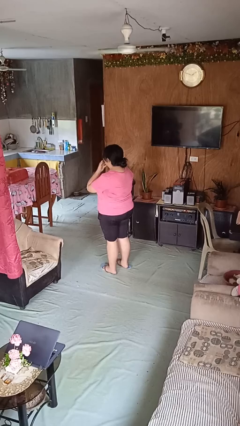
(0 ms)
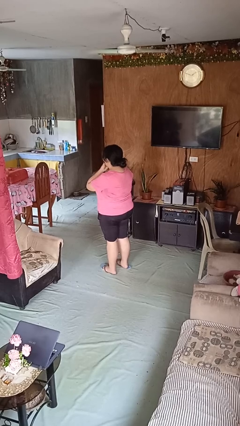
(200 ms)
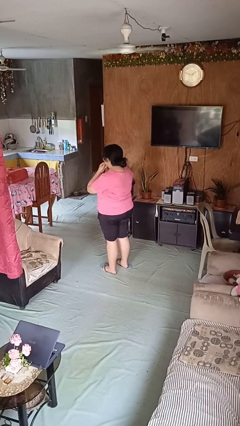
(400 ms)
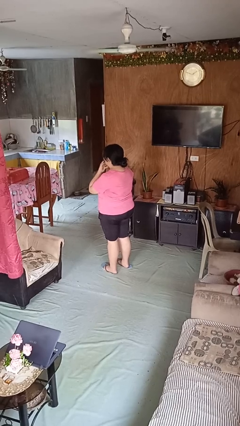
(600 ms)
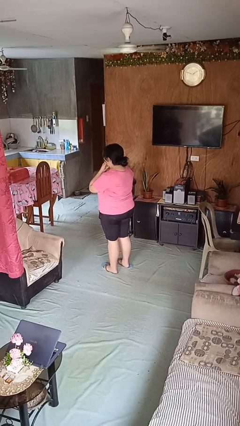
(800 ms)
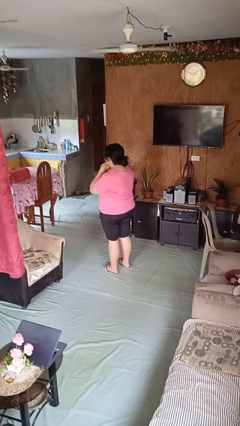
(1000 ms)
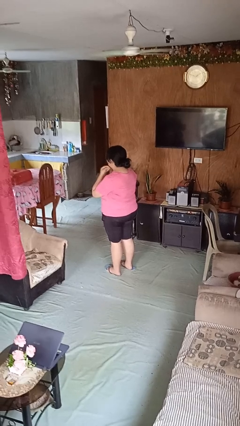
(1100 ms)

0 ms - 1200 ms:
person strokes chin

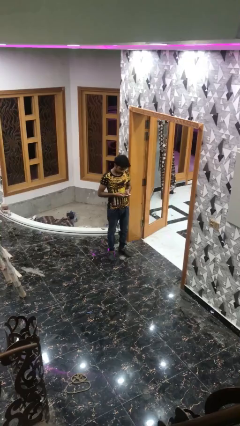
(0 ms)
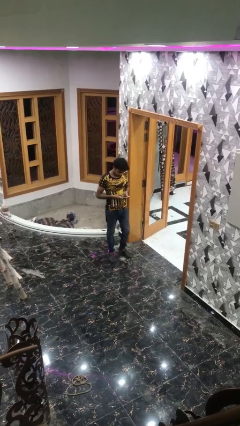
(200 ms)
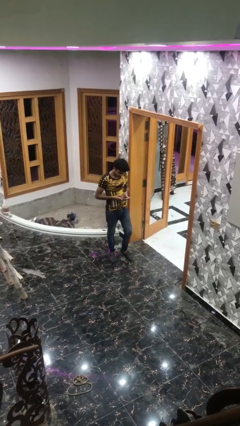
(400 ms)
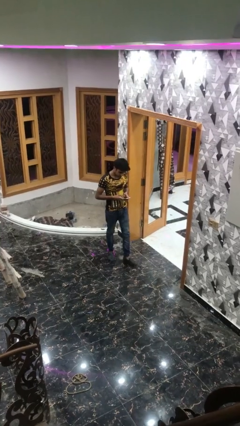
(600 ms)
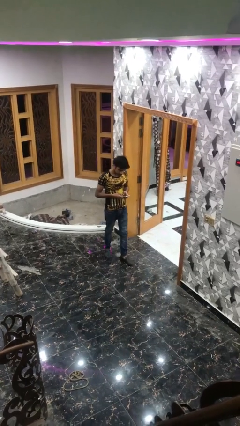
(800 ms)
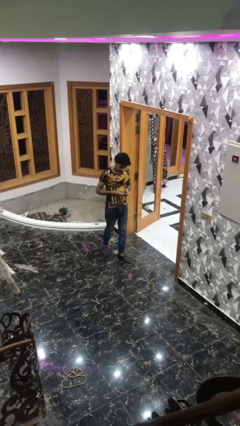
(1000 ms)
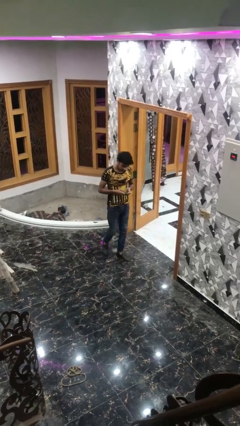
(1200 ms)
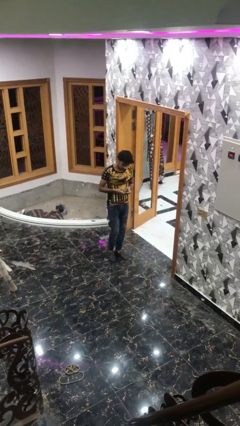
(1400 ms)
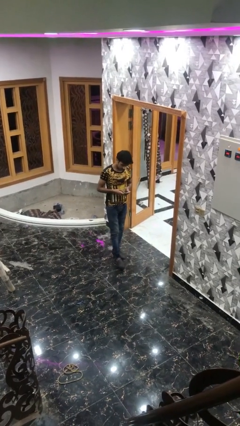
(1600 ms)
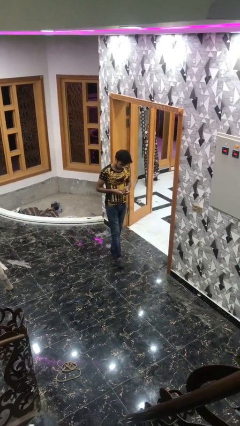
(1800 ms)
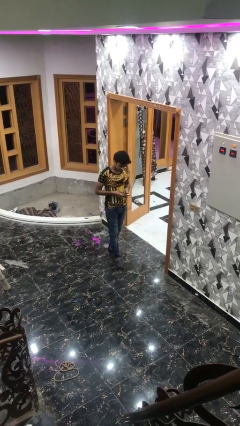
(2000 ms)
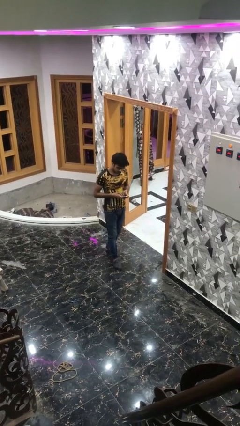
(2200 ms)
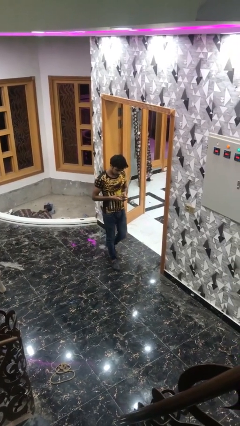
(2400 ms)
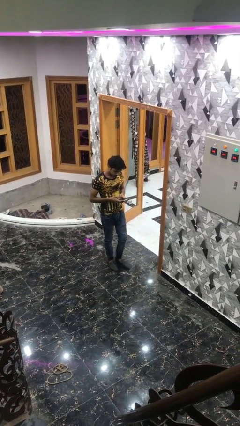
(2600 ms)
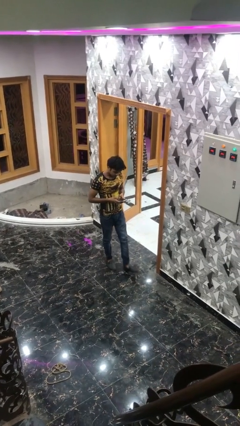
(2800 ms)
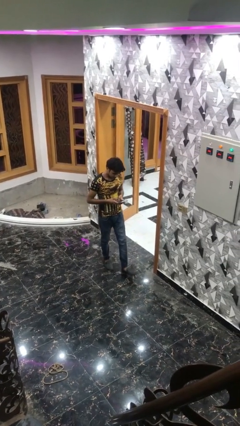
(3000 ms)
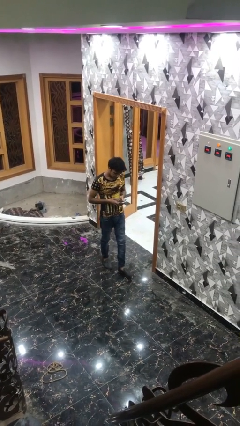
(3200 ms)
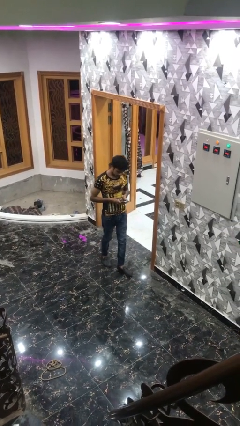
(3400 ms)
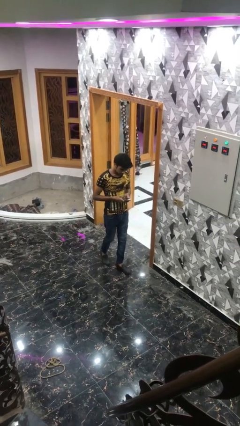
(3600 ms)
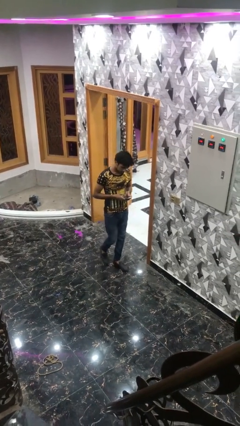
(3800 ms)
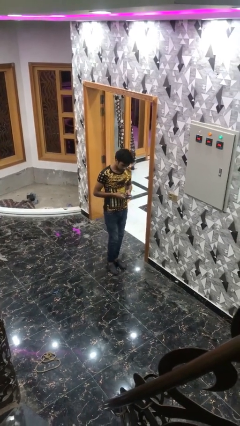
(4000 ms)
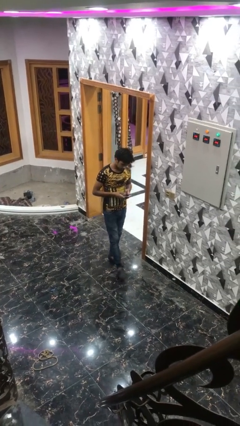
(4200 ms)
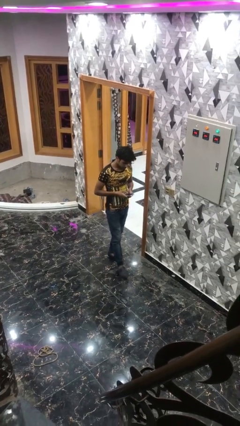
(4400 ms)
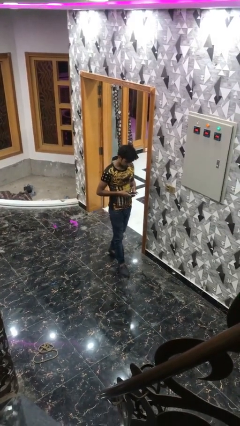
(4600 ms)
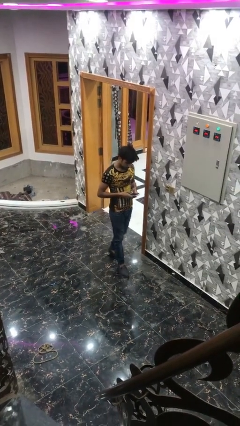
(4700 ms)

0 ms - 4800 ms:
person texts on phone

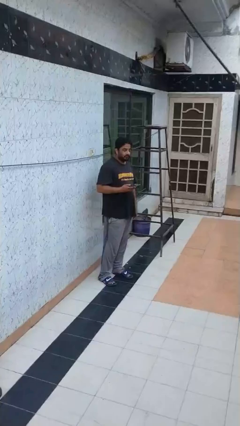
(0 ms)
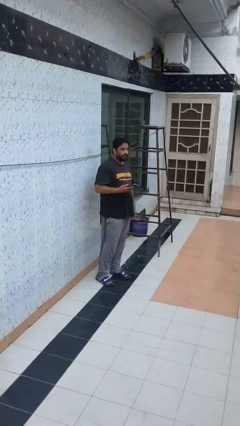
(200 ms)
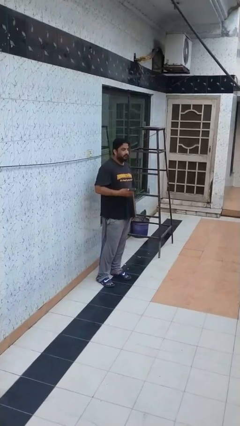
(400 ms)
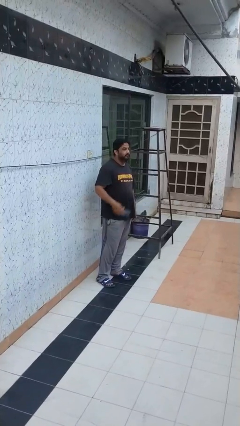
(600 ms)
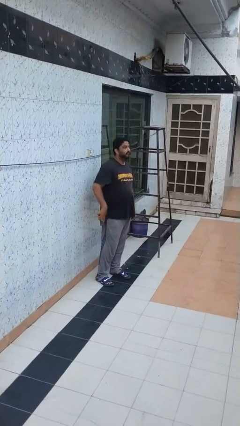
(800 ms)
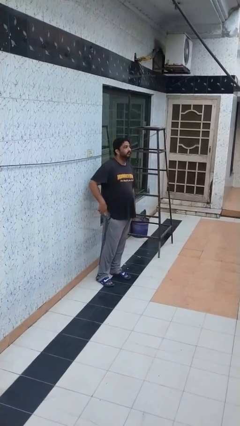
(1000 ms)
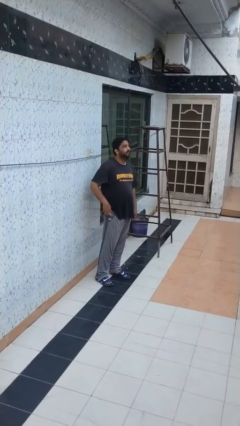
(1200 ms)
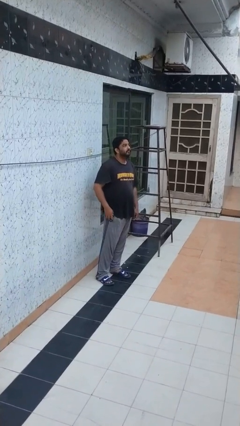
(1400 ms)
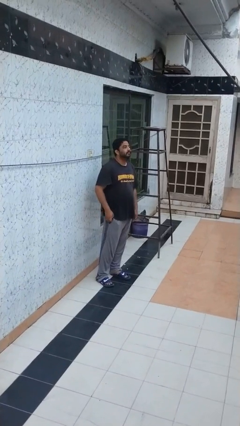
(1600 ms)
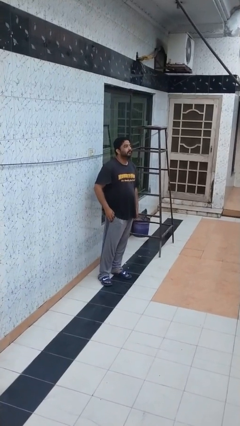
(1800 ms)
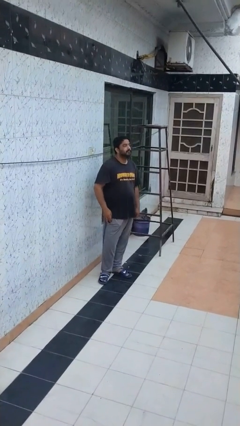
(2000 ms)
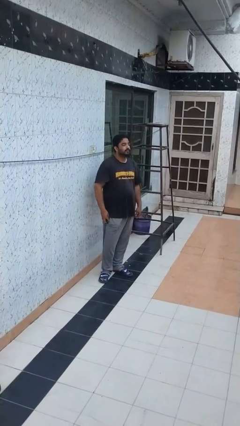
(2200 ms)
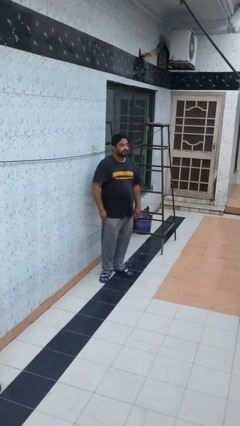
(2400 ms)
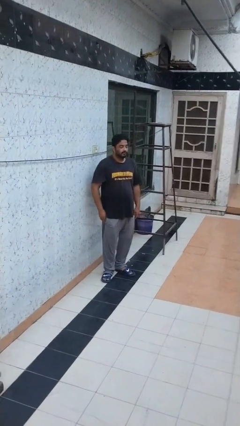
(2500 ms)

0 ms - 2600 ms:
person puts phone into pocket

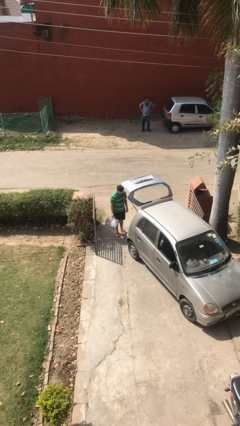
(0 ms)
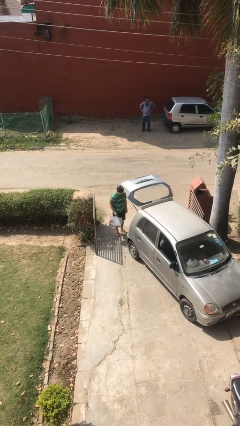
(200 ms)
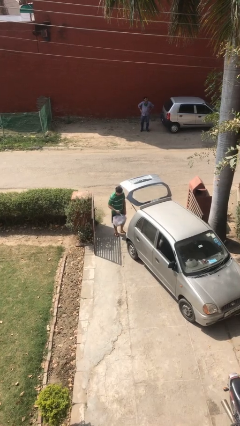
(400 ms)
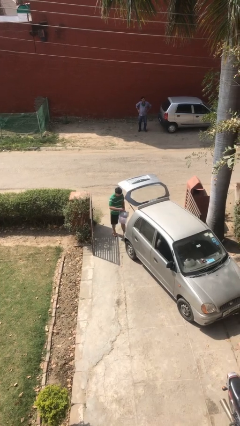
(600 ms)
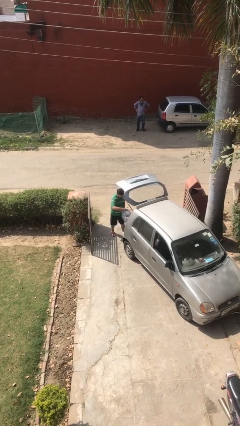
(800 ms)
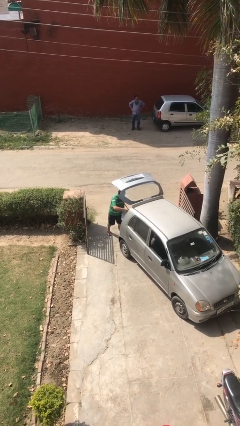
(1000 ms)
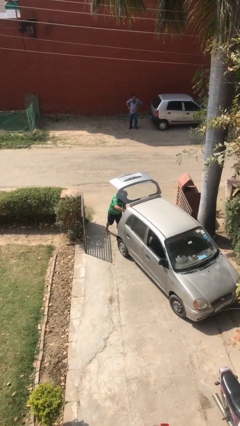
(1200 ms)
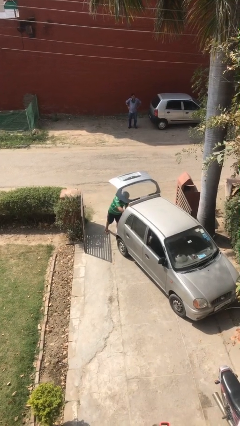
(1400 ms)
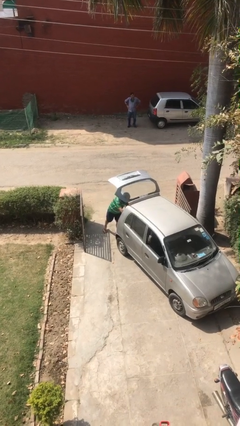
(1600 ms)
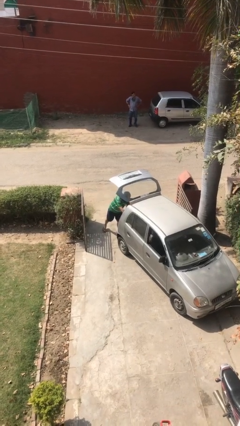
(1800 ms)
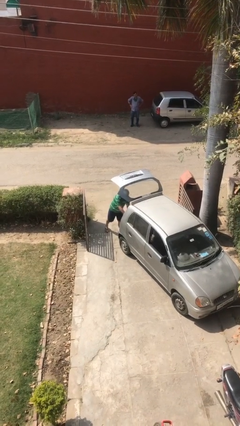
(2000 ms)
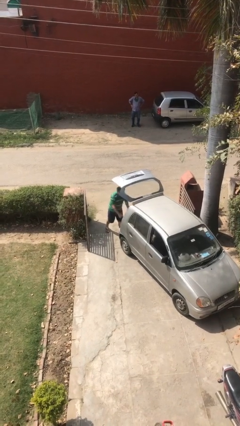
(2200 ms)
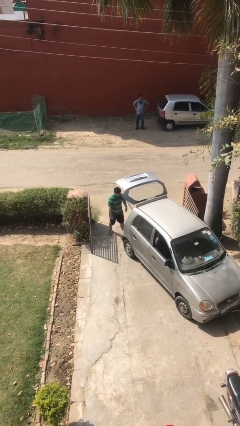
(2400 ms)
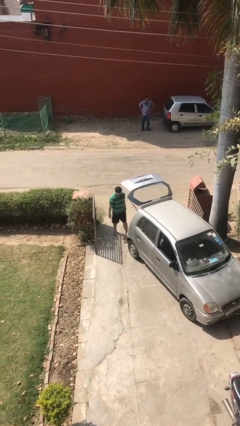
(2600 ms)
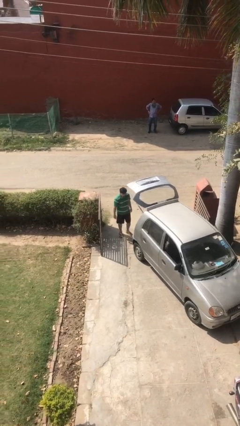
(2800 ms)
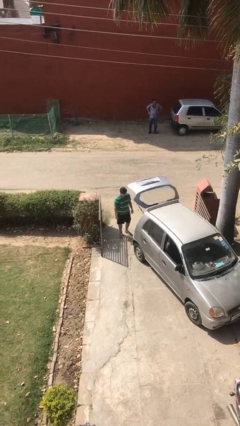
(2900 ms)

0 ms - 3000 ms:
person loads car

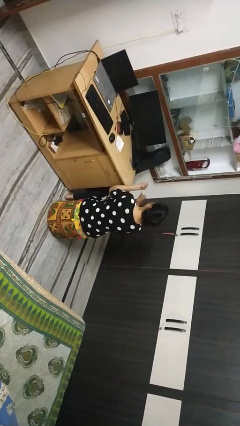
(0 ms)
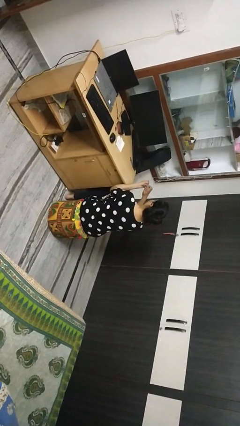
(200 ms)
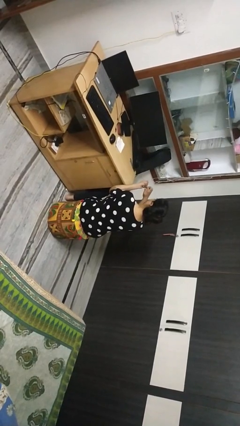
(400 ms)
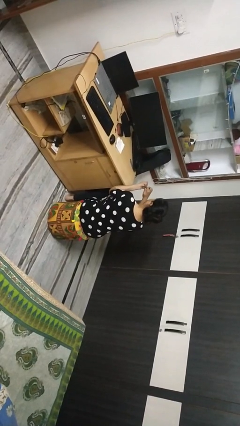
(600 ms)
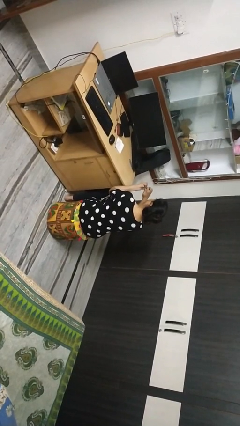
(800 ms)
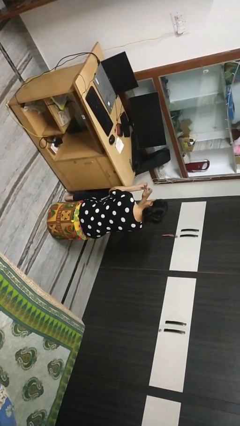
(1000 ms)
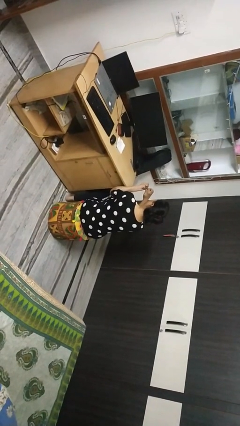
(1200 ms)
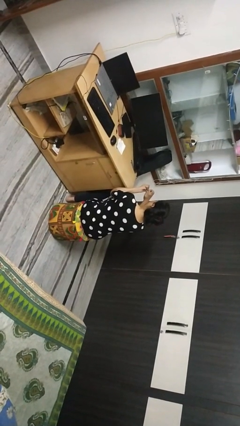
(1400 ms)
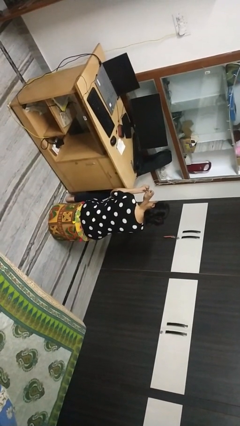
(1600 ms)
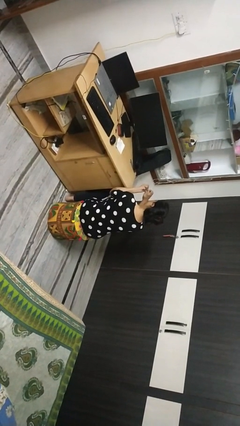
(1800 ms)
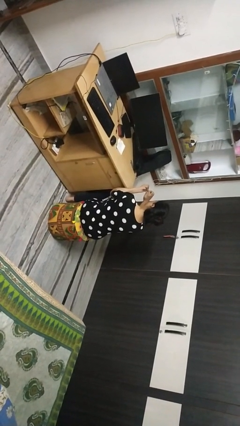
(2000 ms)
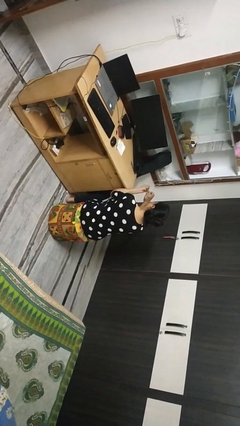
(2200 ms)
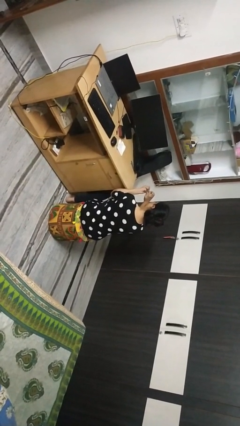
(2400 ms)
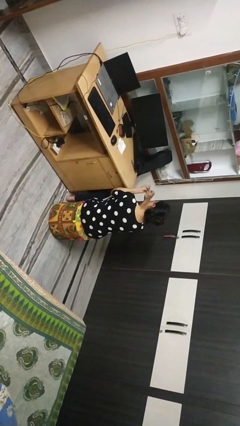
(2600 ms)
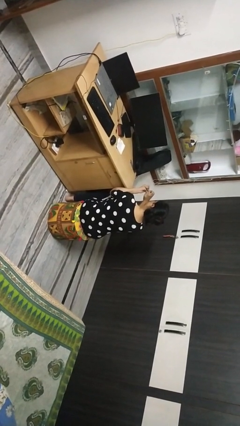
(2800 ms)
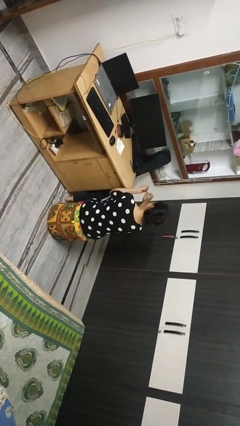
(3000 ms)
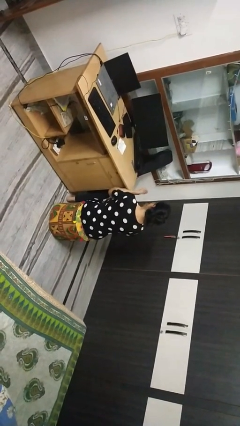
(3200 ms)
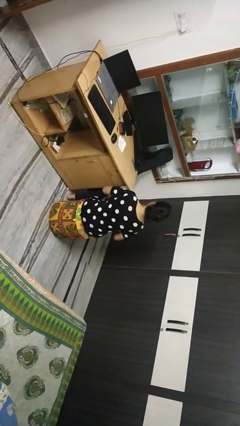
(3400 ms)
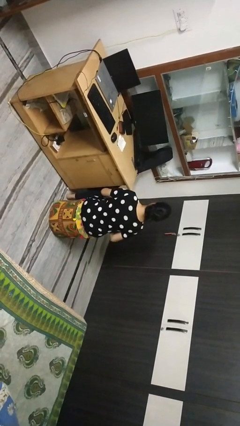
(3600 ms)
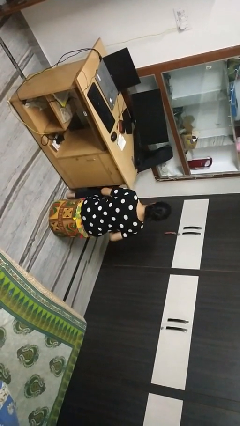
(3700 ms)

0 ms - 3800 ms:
person files fingernails

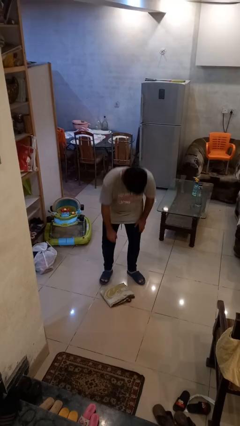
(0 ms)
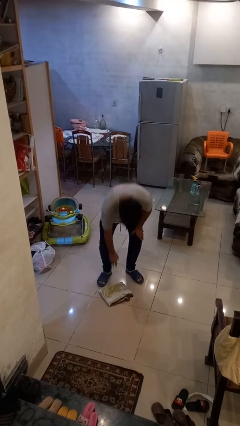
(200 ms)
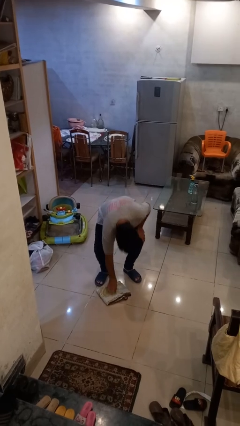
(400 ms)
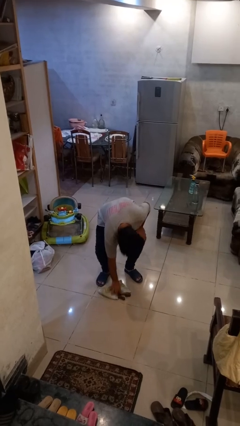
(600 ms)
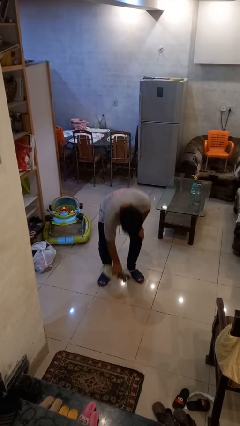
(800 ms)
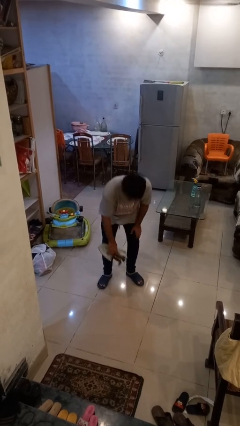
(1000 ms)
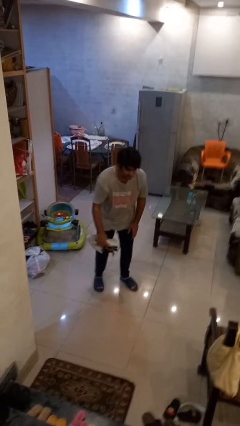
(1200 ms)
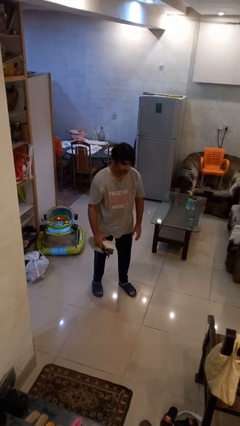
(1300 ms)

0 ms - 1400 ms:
person picks up object from floor

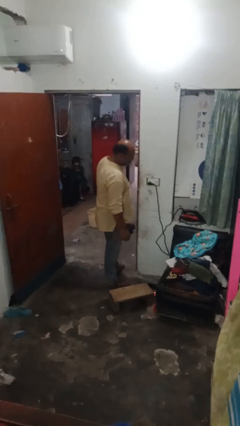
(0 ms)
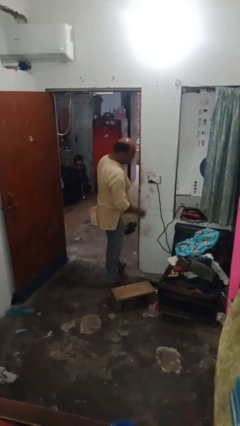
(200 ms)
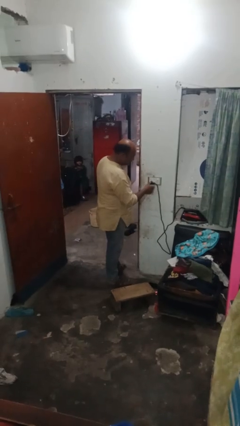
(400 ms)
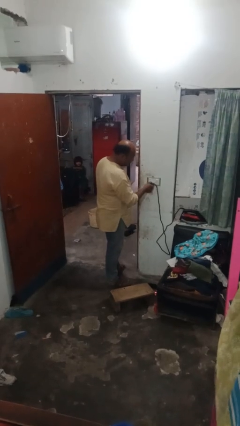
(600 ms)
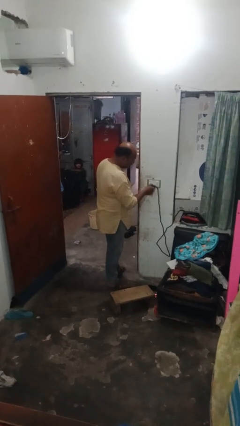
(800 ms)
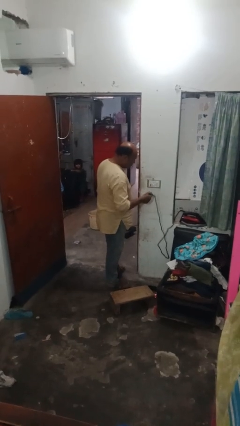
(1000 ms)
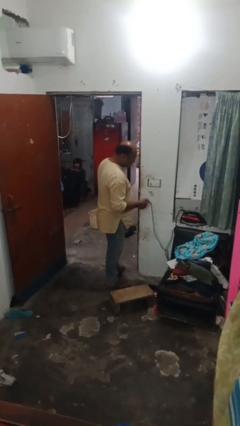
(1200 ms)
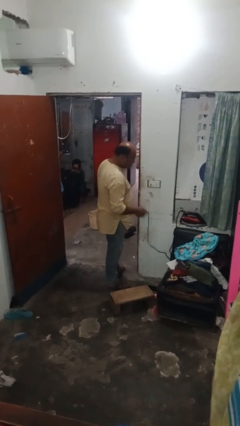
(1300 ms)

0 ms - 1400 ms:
person unplugs from electrical socket
